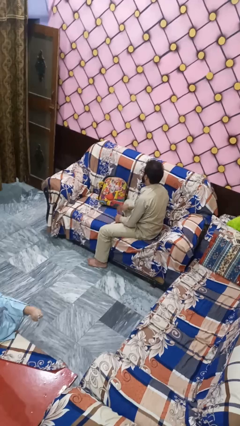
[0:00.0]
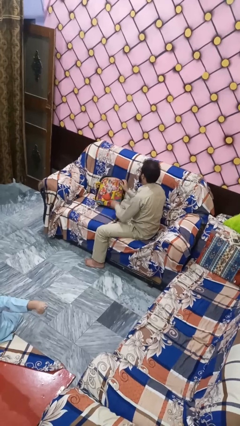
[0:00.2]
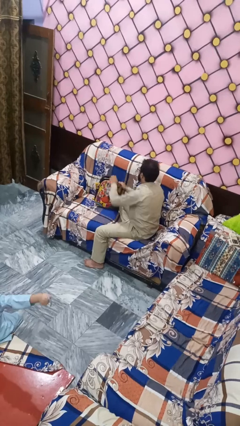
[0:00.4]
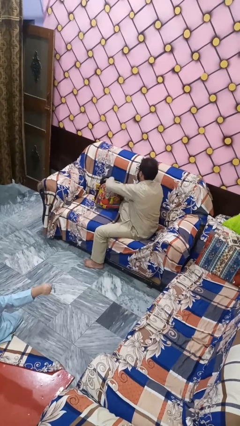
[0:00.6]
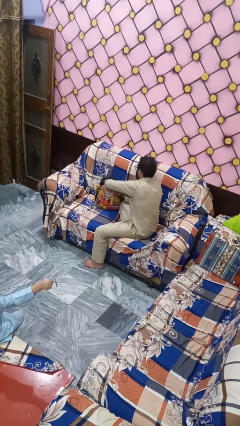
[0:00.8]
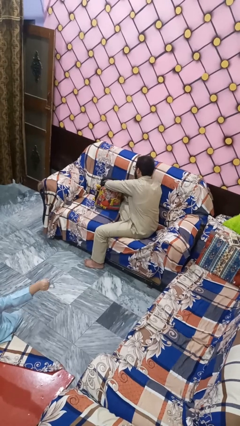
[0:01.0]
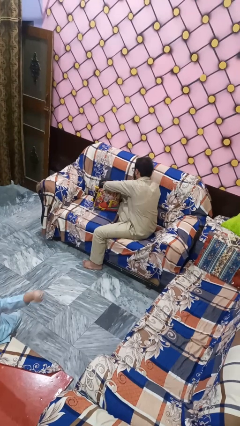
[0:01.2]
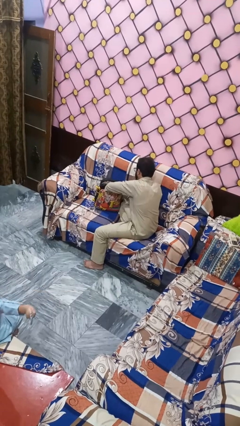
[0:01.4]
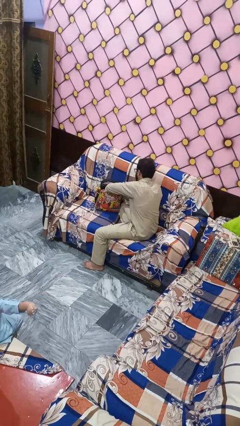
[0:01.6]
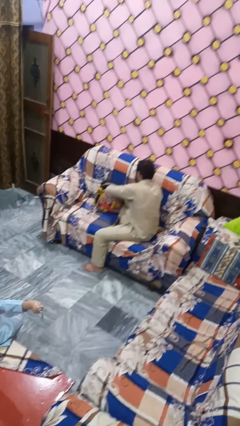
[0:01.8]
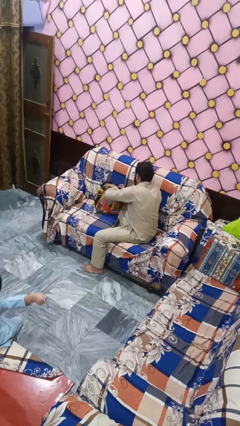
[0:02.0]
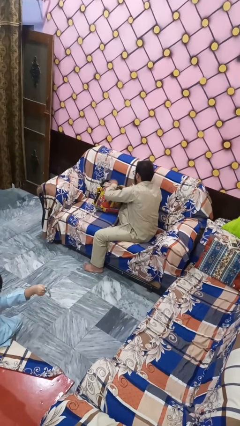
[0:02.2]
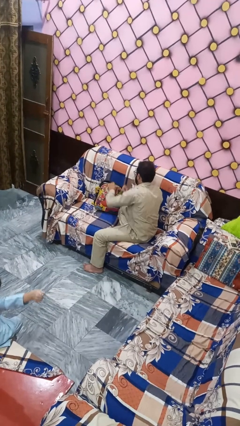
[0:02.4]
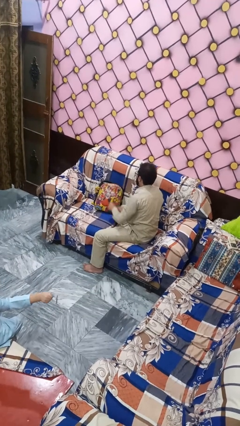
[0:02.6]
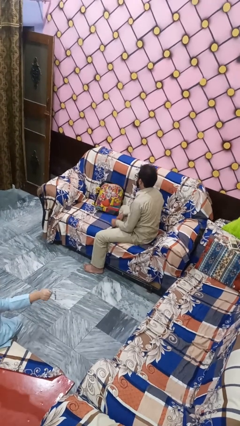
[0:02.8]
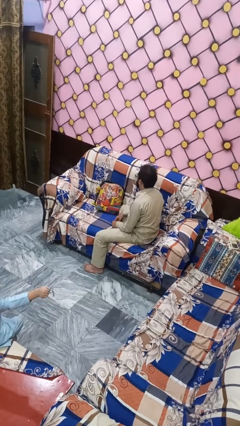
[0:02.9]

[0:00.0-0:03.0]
person searches in bag

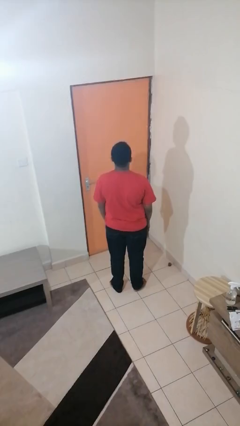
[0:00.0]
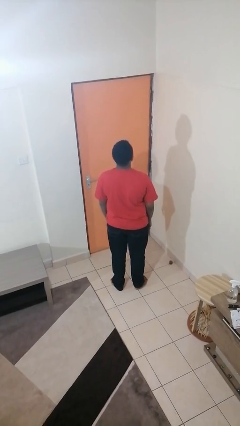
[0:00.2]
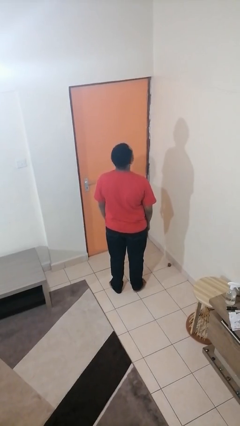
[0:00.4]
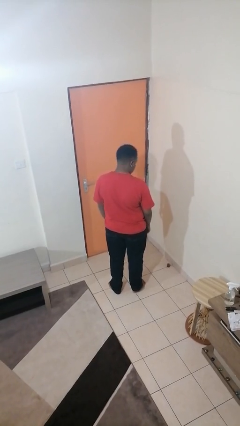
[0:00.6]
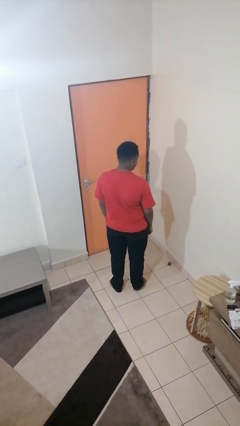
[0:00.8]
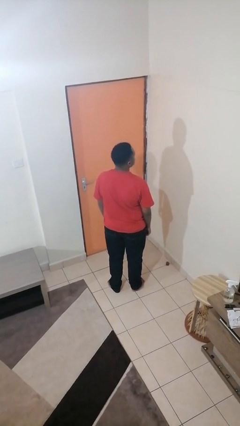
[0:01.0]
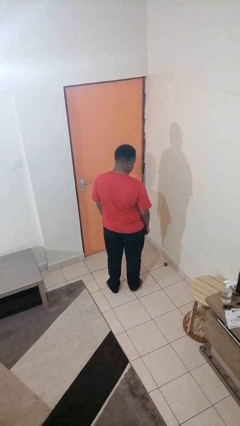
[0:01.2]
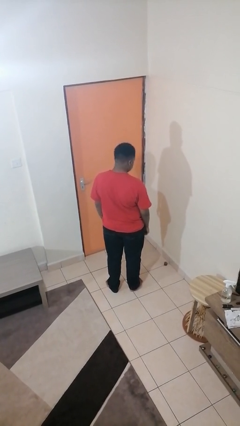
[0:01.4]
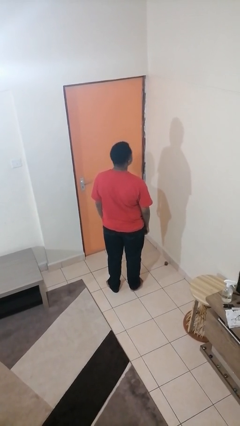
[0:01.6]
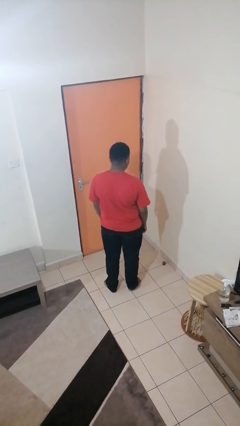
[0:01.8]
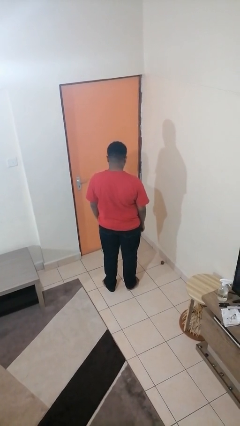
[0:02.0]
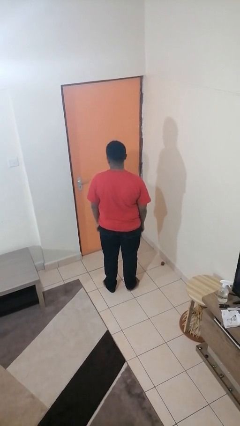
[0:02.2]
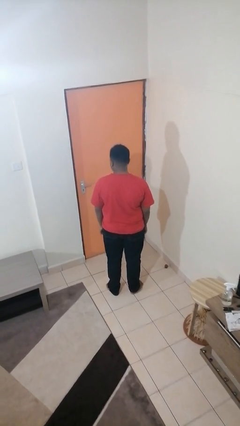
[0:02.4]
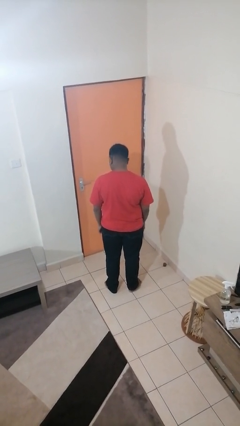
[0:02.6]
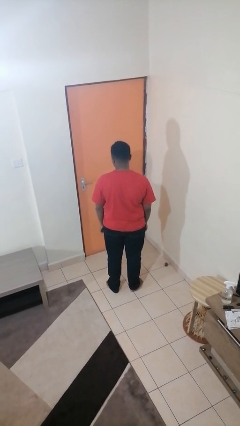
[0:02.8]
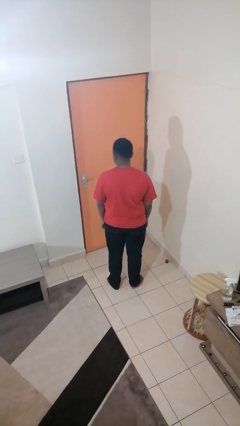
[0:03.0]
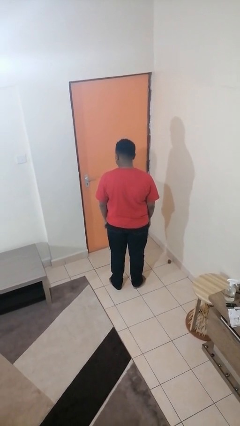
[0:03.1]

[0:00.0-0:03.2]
person nods head

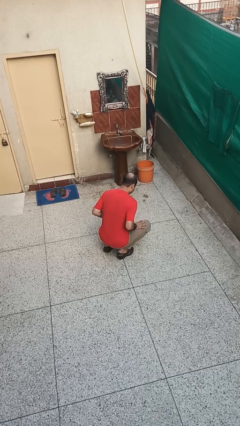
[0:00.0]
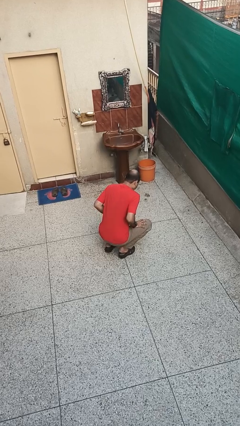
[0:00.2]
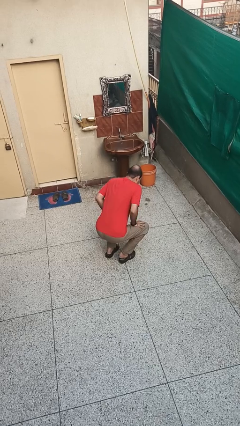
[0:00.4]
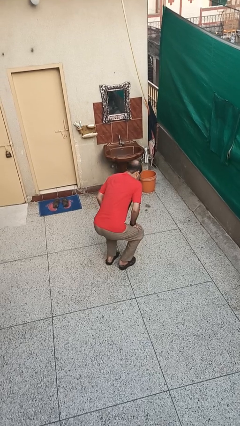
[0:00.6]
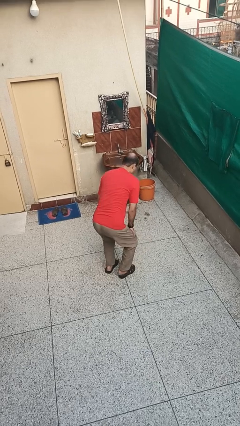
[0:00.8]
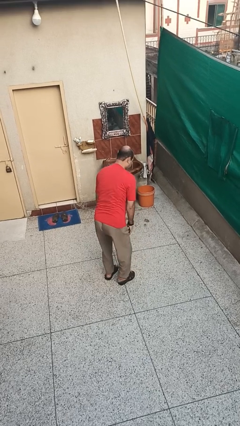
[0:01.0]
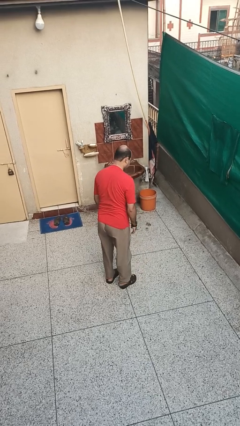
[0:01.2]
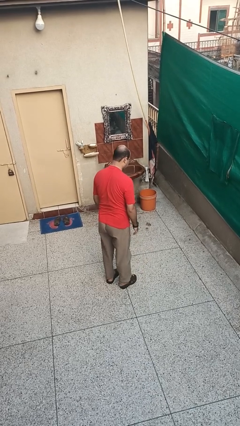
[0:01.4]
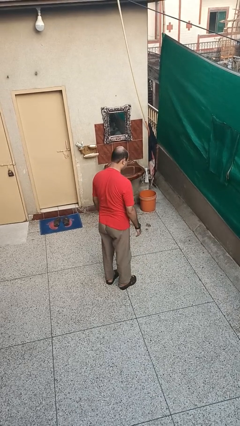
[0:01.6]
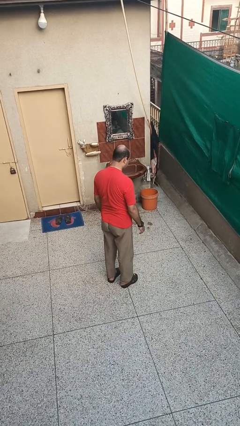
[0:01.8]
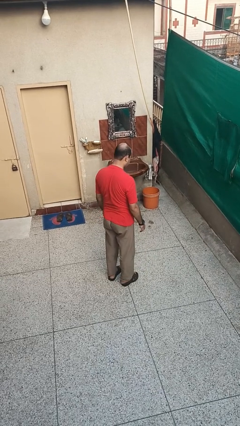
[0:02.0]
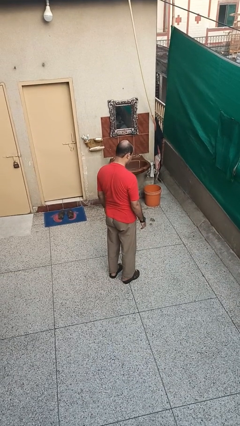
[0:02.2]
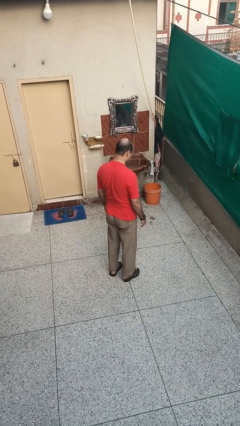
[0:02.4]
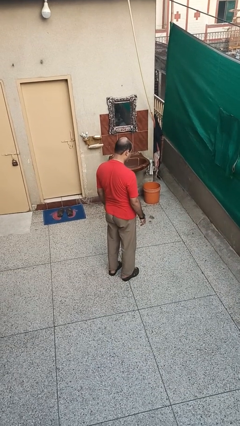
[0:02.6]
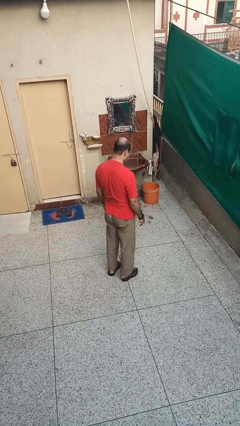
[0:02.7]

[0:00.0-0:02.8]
person stands up

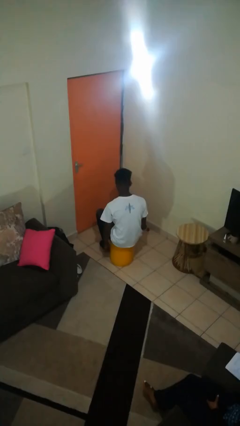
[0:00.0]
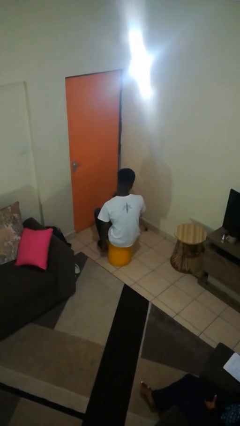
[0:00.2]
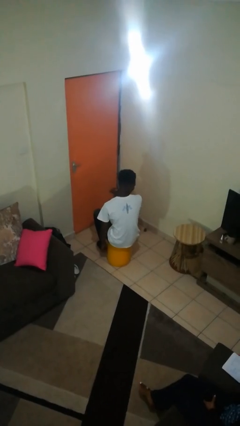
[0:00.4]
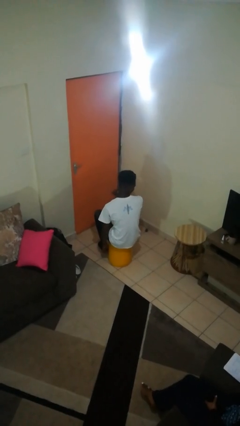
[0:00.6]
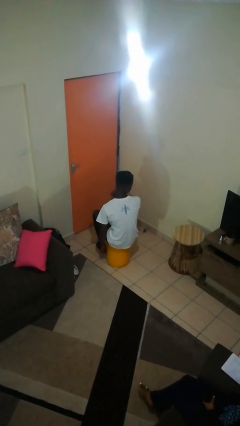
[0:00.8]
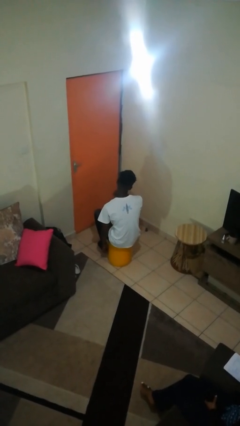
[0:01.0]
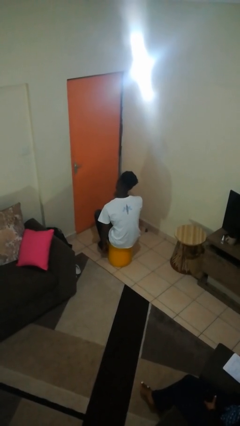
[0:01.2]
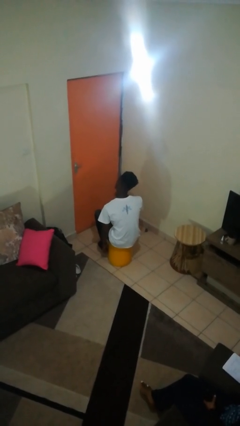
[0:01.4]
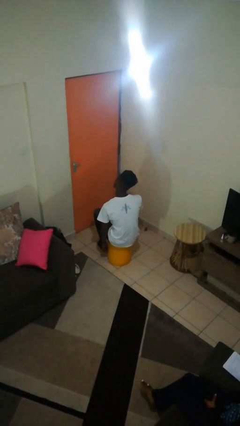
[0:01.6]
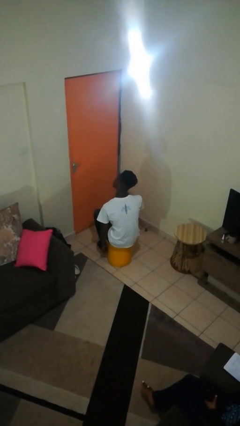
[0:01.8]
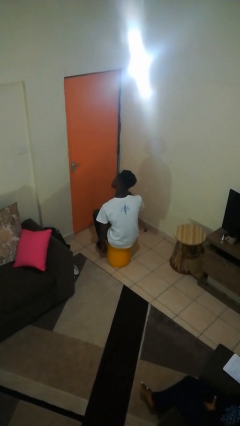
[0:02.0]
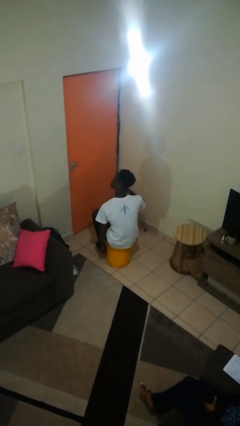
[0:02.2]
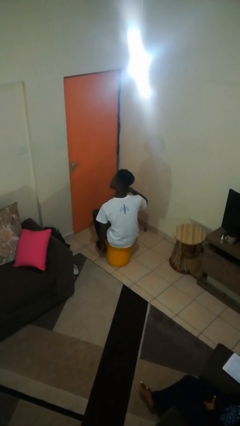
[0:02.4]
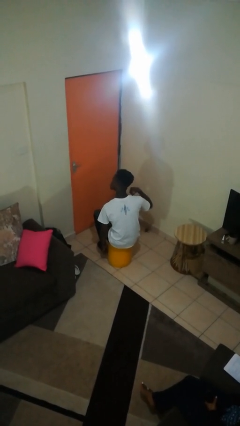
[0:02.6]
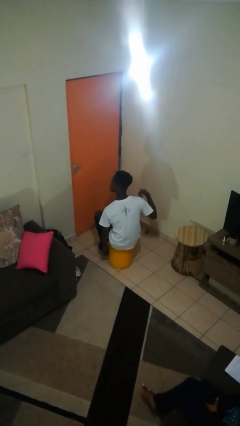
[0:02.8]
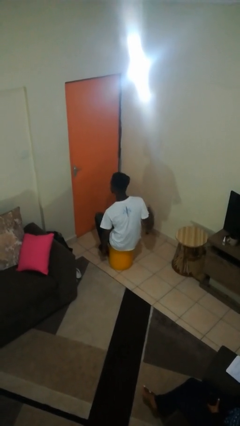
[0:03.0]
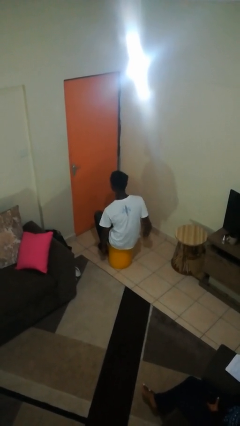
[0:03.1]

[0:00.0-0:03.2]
person gestures cut

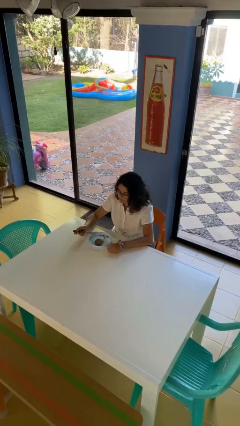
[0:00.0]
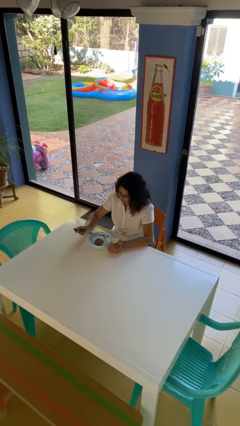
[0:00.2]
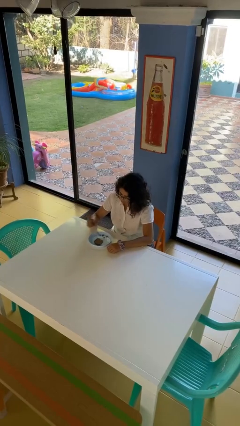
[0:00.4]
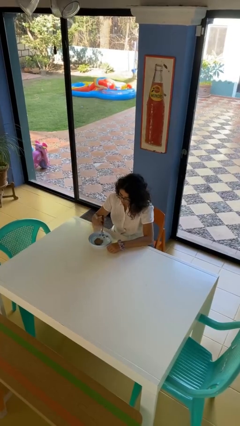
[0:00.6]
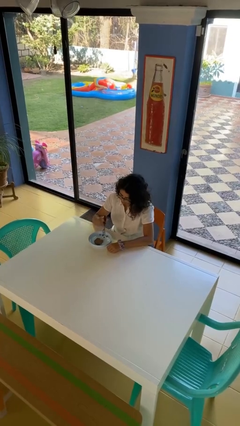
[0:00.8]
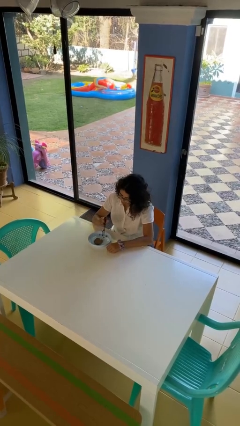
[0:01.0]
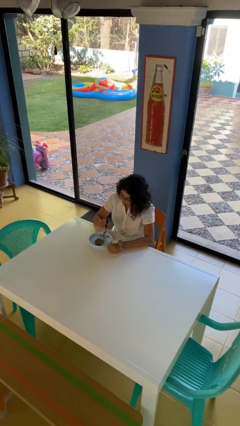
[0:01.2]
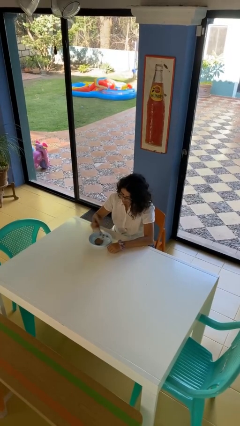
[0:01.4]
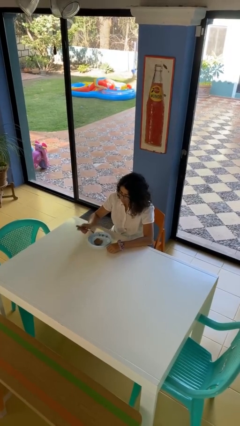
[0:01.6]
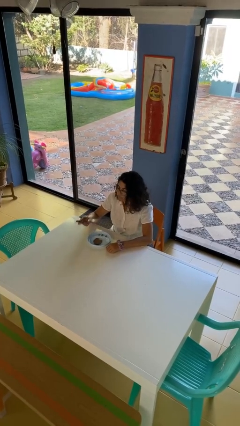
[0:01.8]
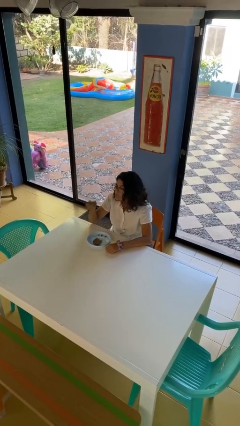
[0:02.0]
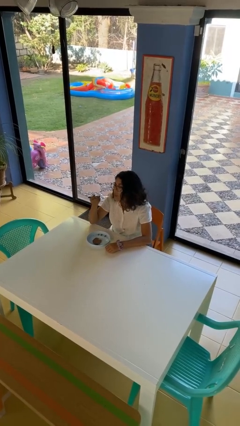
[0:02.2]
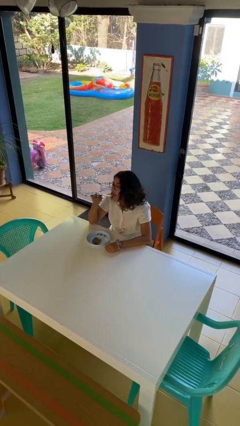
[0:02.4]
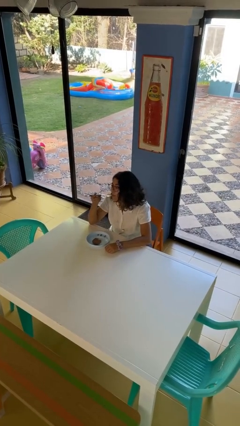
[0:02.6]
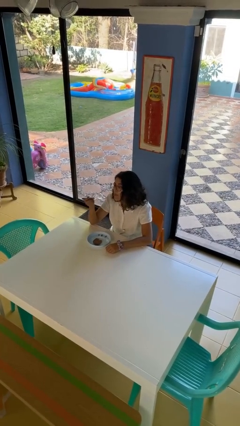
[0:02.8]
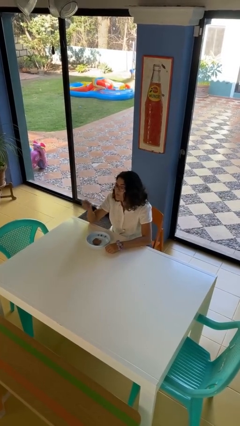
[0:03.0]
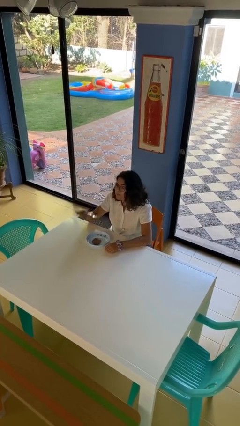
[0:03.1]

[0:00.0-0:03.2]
person eats with utensil

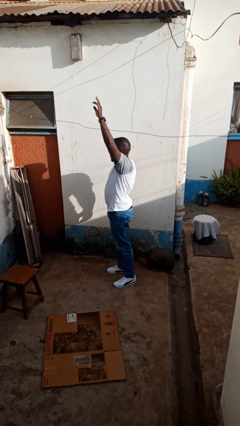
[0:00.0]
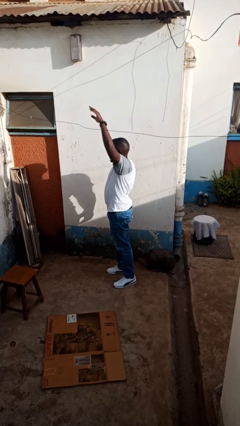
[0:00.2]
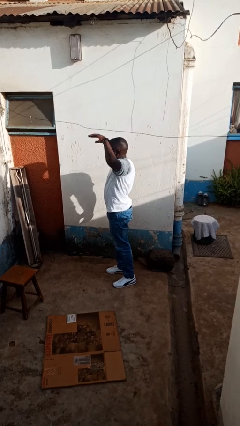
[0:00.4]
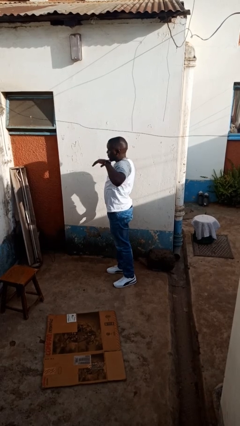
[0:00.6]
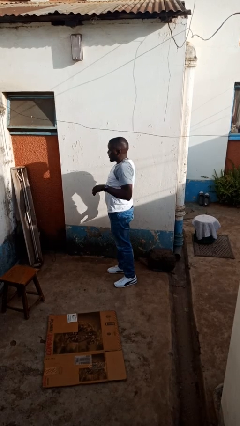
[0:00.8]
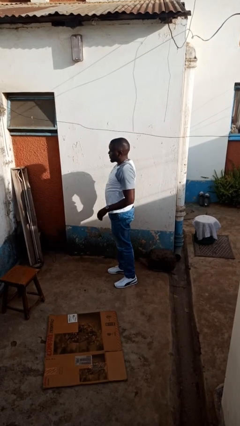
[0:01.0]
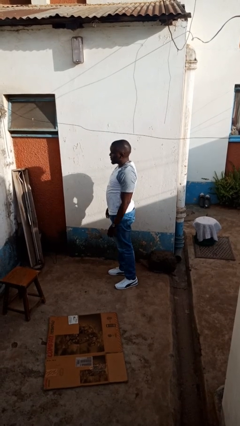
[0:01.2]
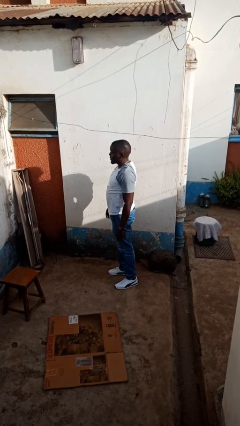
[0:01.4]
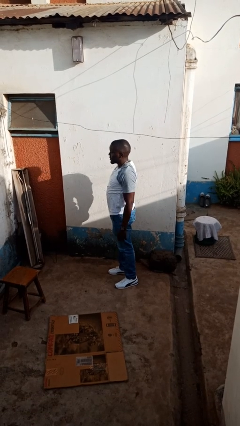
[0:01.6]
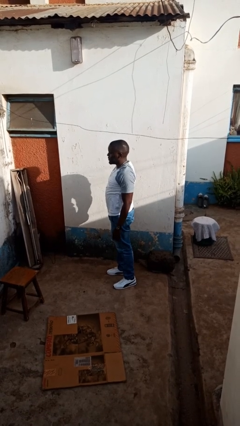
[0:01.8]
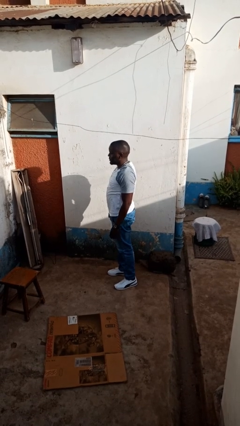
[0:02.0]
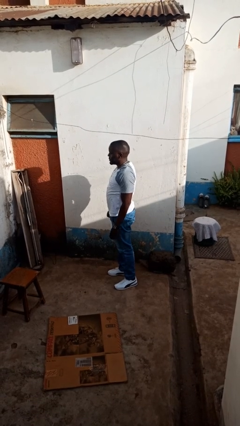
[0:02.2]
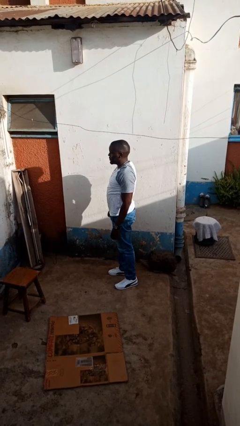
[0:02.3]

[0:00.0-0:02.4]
person gestures lower hand
